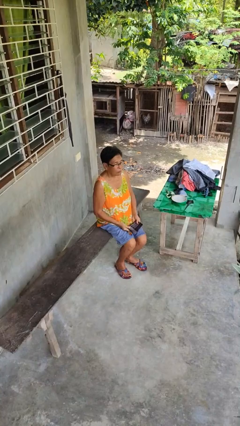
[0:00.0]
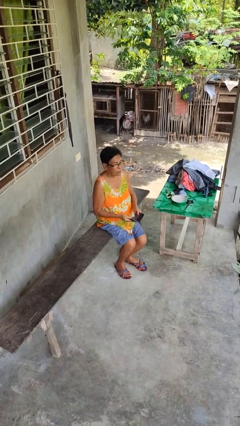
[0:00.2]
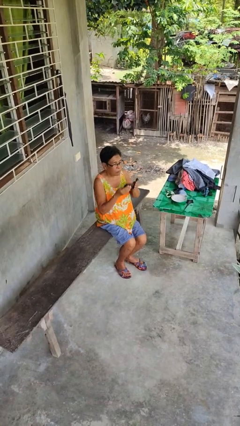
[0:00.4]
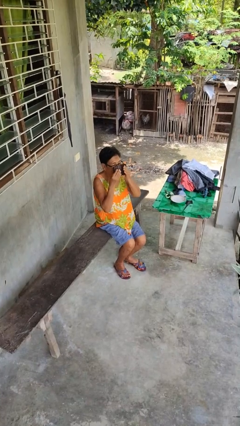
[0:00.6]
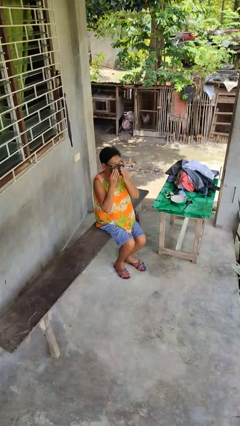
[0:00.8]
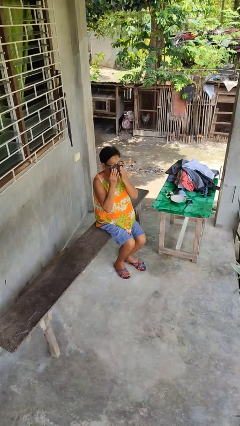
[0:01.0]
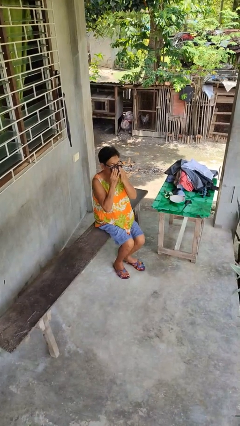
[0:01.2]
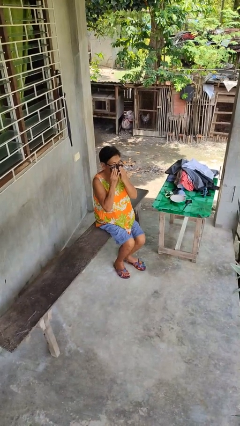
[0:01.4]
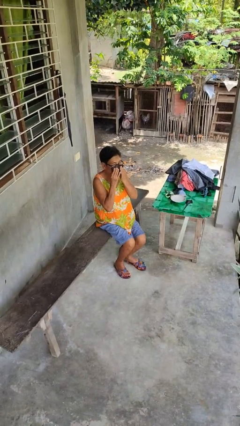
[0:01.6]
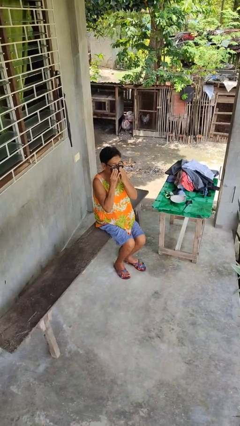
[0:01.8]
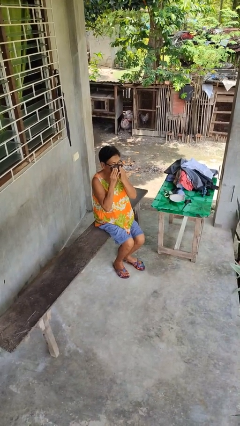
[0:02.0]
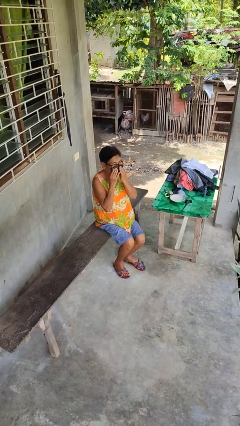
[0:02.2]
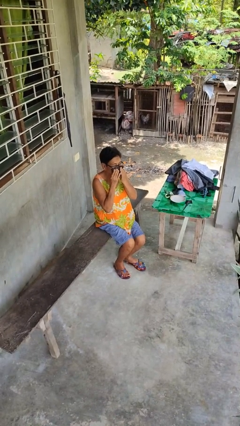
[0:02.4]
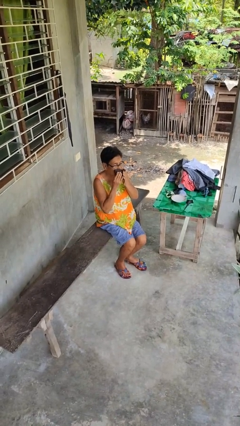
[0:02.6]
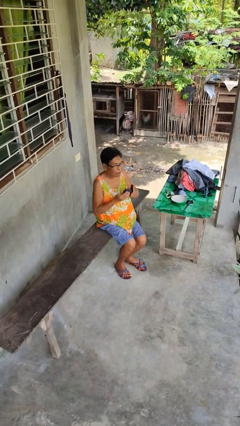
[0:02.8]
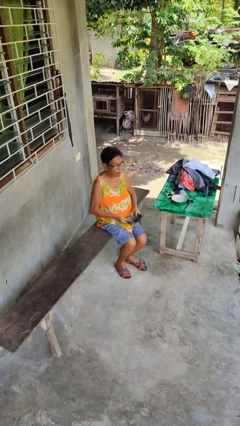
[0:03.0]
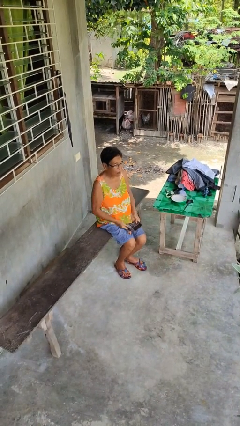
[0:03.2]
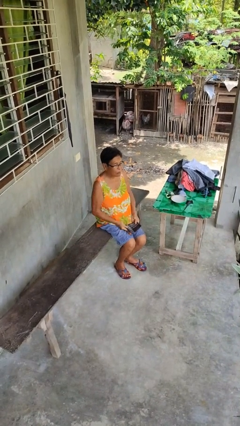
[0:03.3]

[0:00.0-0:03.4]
person blows nose

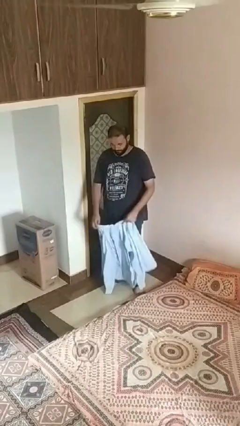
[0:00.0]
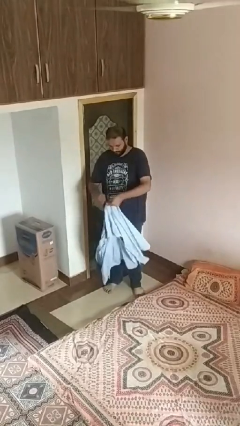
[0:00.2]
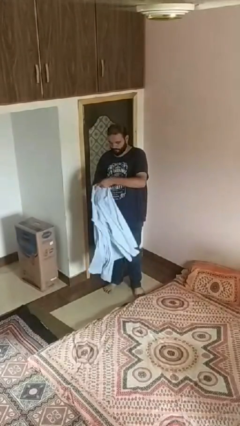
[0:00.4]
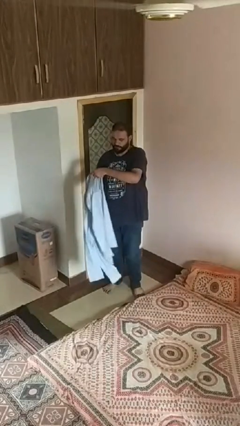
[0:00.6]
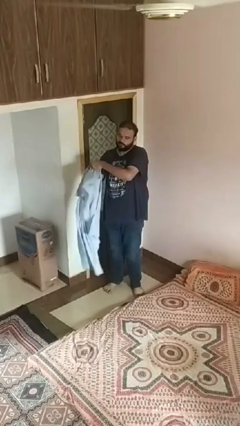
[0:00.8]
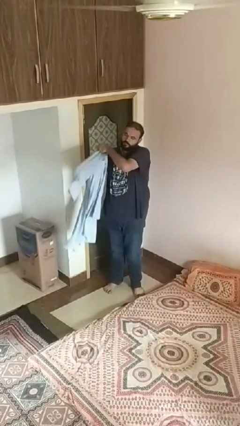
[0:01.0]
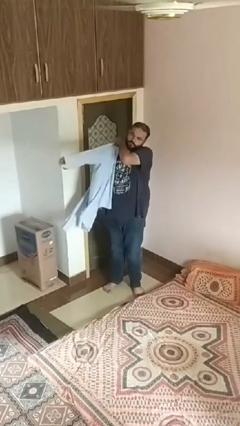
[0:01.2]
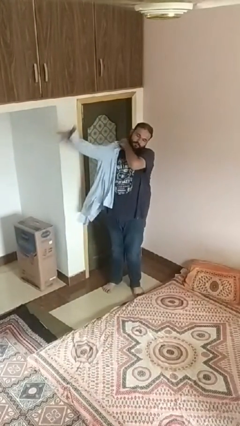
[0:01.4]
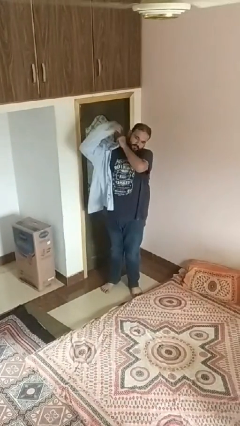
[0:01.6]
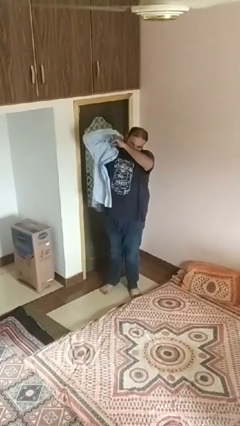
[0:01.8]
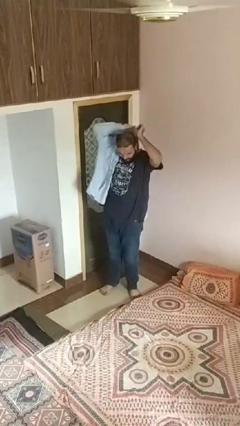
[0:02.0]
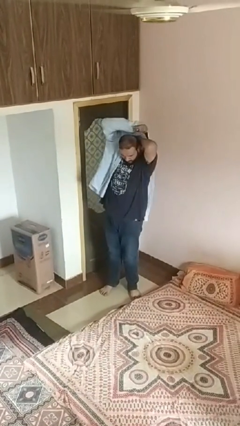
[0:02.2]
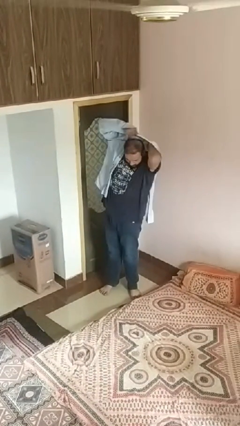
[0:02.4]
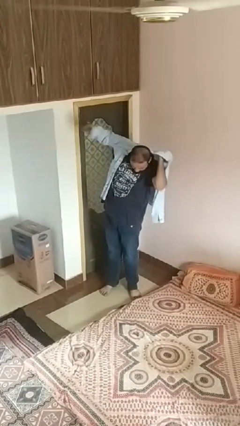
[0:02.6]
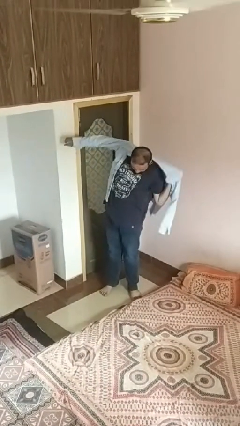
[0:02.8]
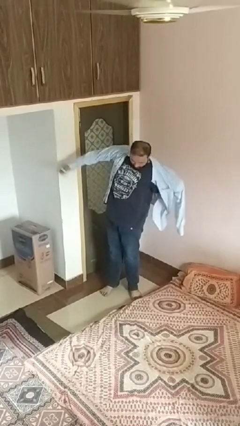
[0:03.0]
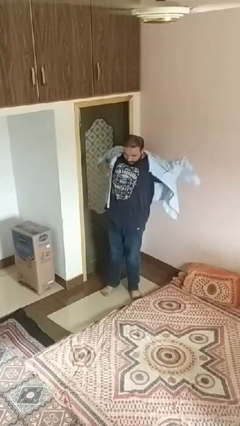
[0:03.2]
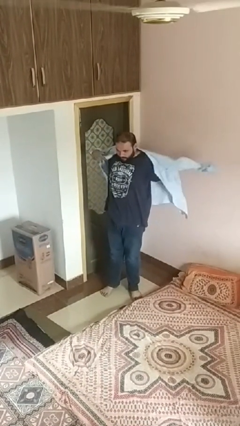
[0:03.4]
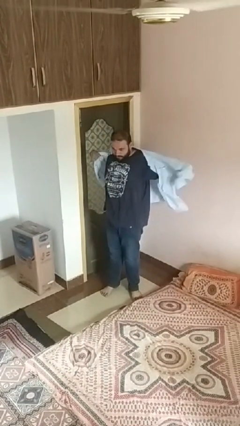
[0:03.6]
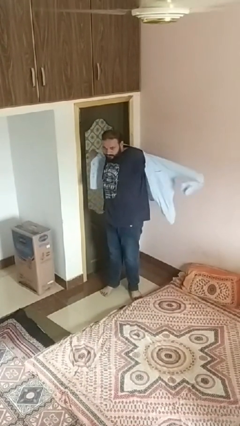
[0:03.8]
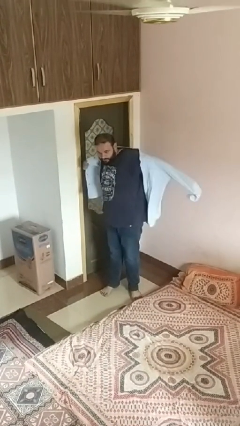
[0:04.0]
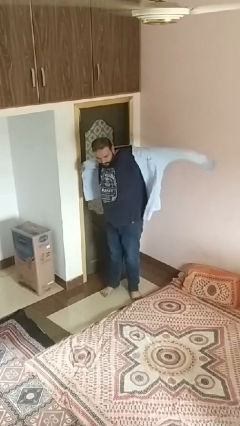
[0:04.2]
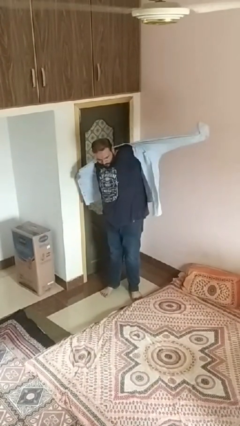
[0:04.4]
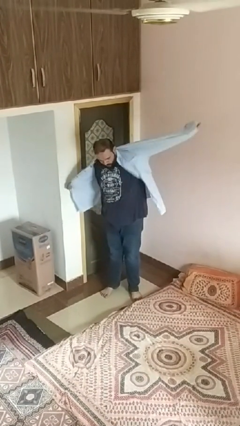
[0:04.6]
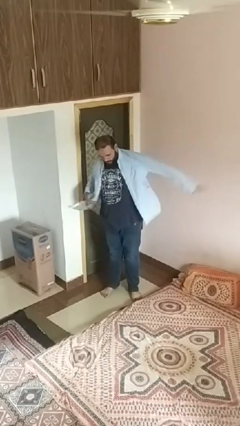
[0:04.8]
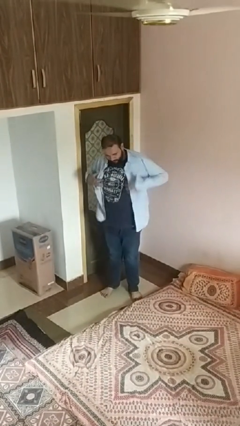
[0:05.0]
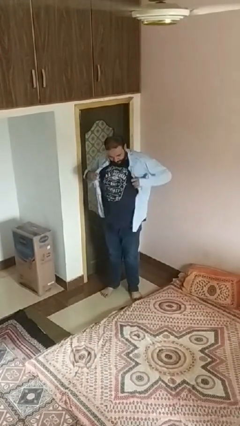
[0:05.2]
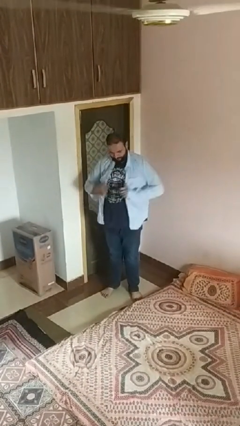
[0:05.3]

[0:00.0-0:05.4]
person puts on shirt

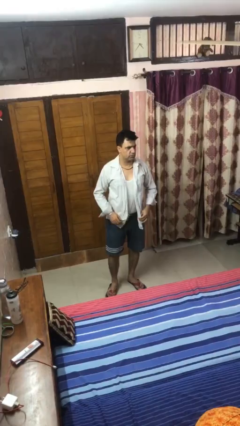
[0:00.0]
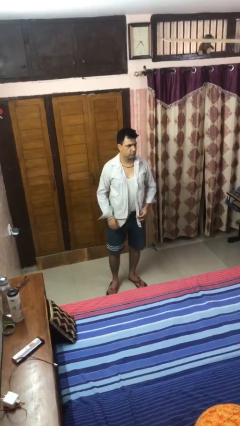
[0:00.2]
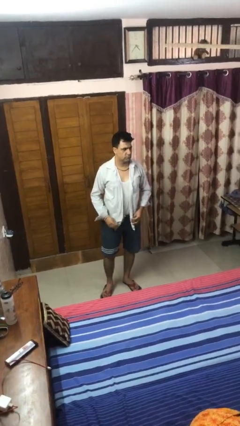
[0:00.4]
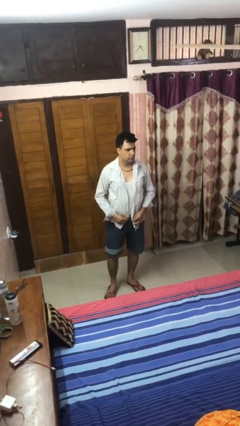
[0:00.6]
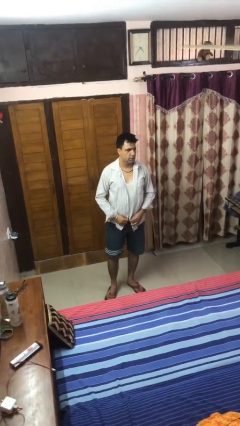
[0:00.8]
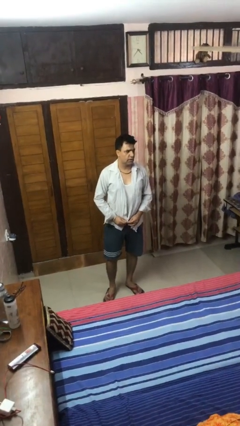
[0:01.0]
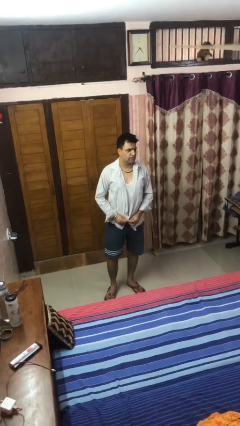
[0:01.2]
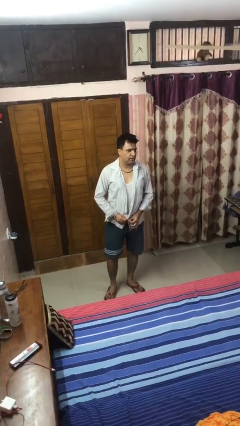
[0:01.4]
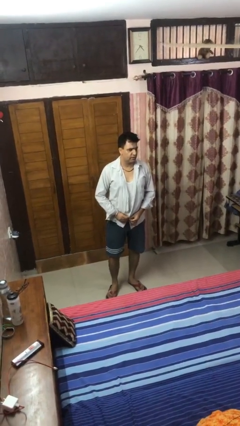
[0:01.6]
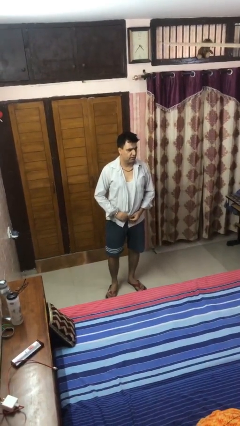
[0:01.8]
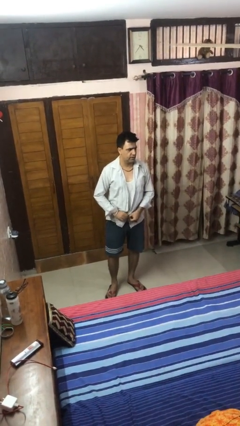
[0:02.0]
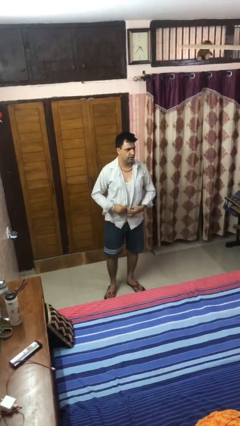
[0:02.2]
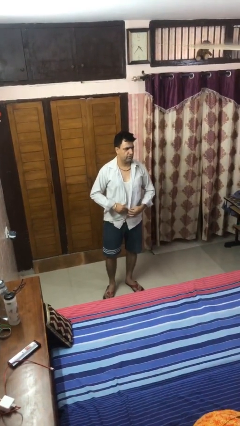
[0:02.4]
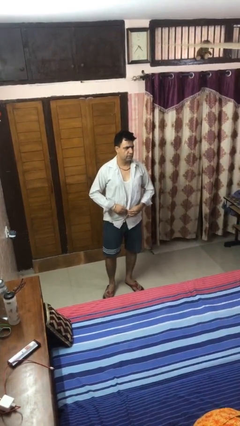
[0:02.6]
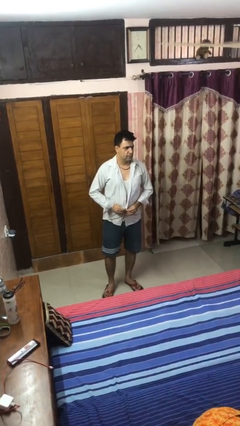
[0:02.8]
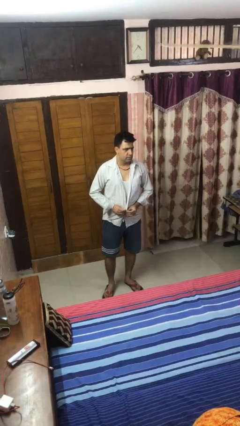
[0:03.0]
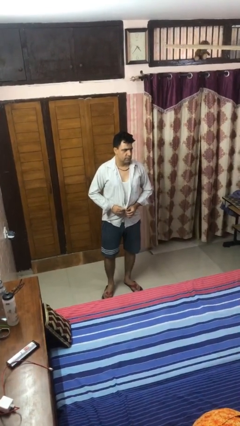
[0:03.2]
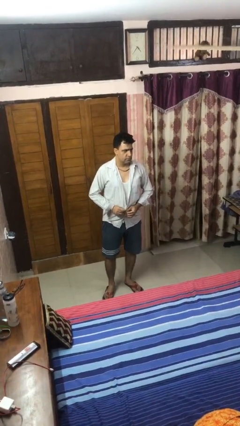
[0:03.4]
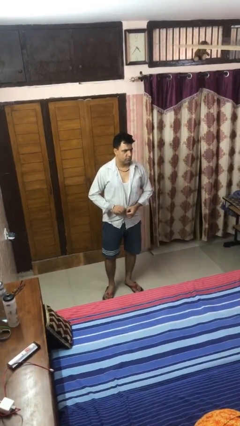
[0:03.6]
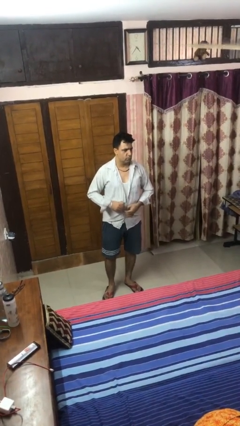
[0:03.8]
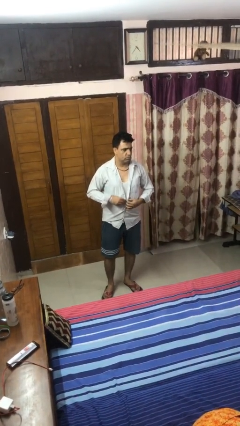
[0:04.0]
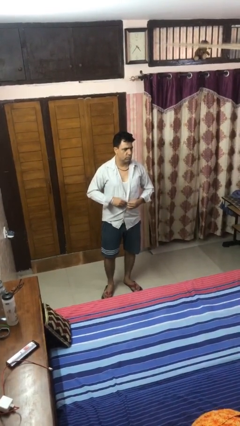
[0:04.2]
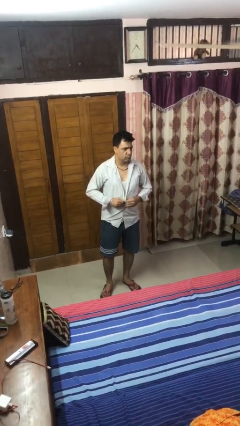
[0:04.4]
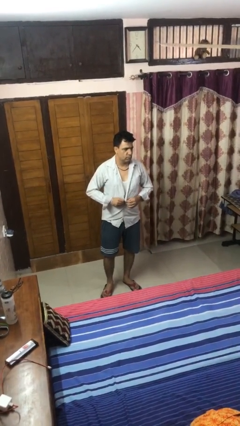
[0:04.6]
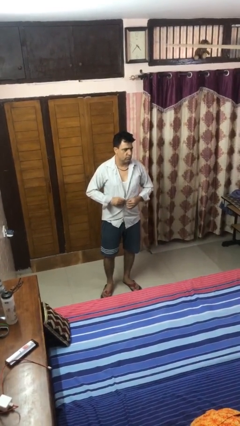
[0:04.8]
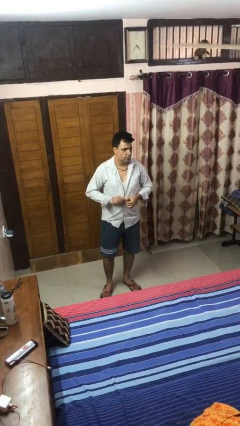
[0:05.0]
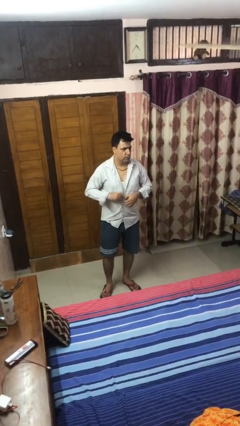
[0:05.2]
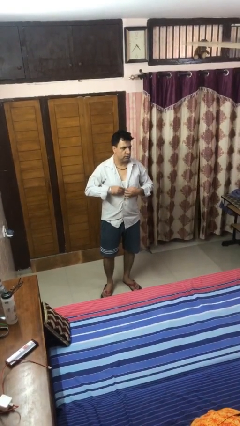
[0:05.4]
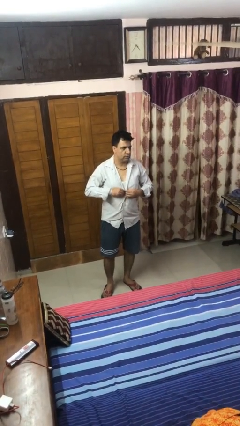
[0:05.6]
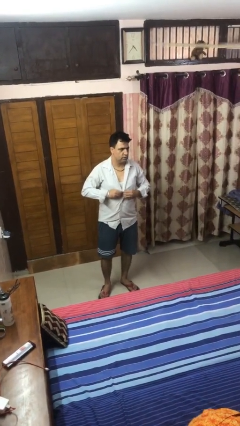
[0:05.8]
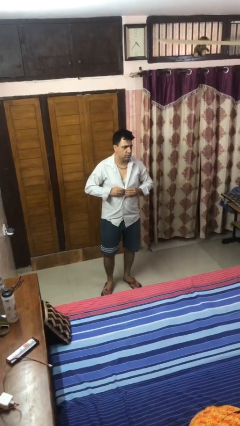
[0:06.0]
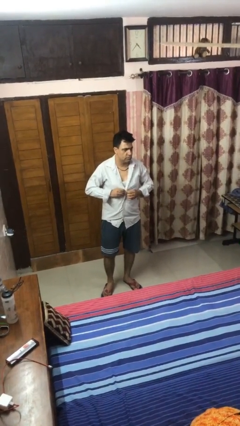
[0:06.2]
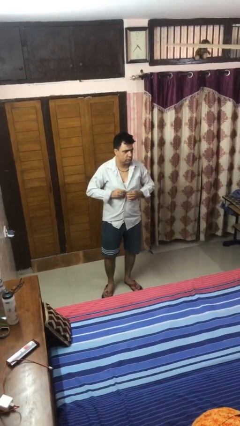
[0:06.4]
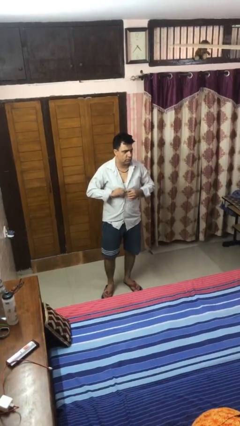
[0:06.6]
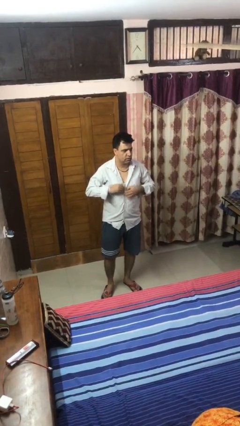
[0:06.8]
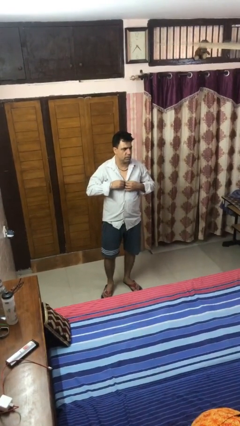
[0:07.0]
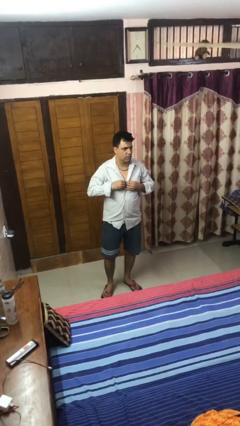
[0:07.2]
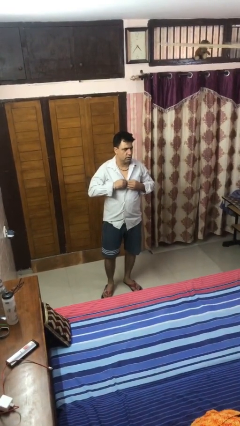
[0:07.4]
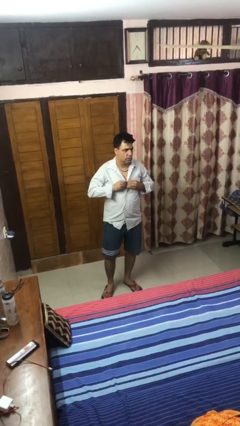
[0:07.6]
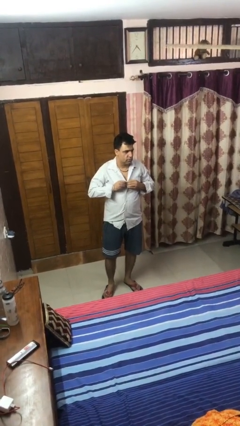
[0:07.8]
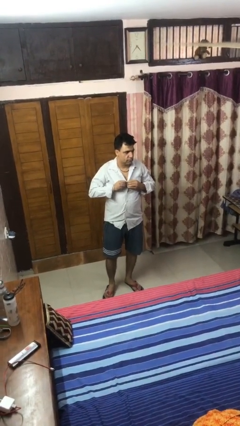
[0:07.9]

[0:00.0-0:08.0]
person buttons shirt

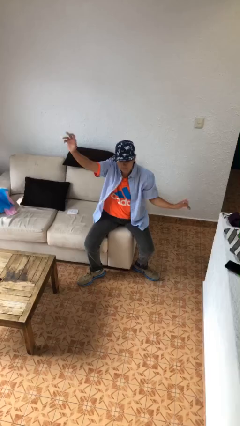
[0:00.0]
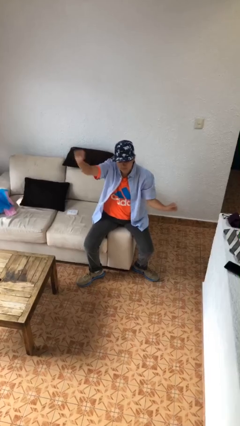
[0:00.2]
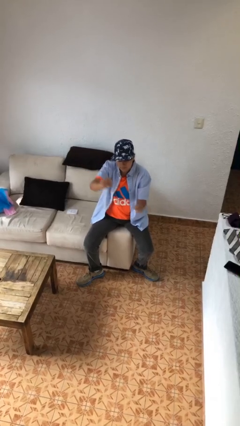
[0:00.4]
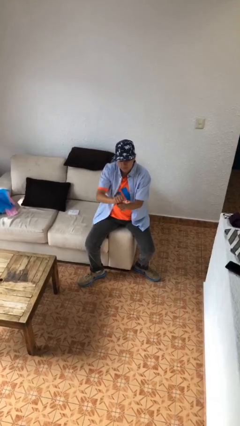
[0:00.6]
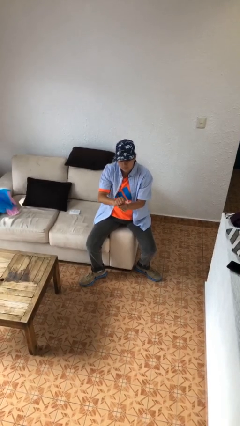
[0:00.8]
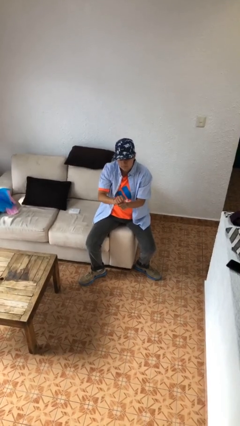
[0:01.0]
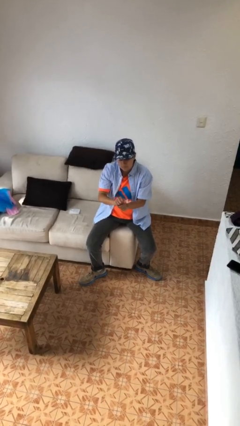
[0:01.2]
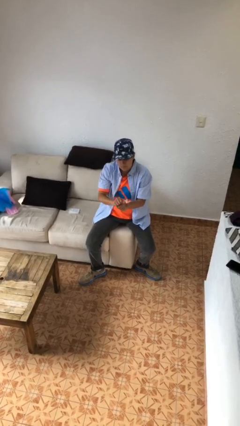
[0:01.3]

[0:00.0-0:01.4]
person gestures zoom out
